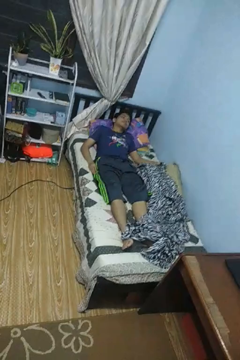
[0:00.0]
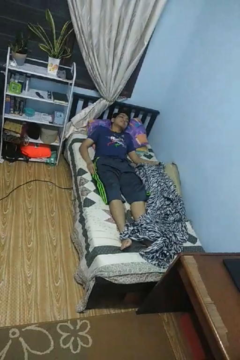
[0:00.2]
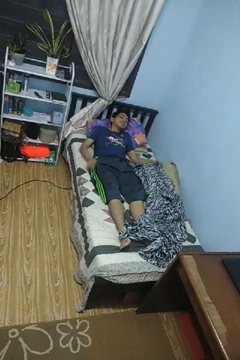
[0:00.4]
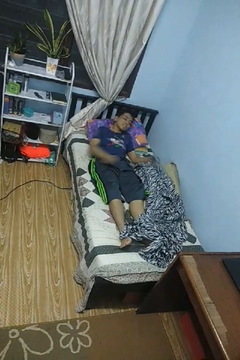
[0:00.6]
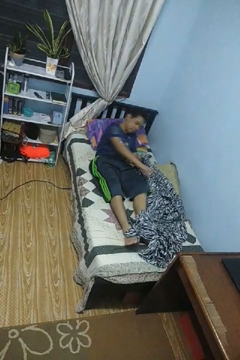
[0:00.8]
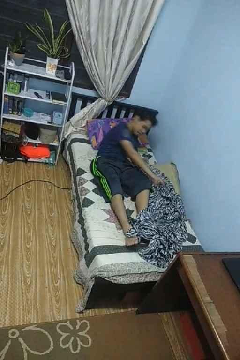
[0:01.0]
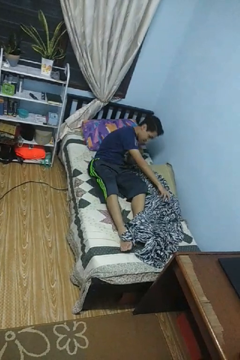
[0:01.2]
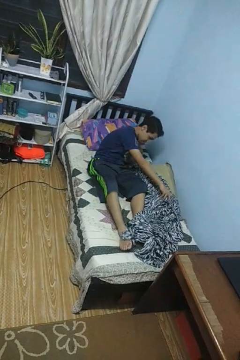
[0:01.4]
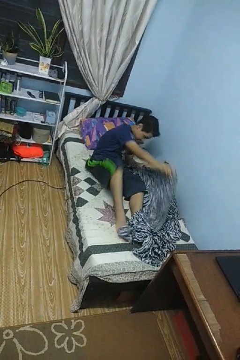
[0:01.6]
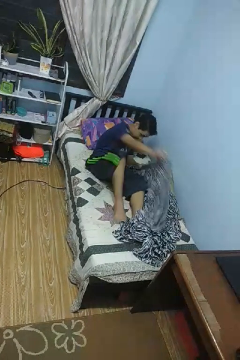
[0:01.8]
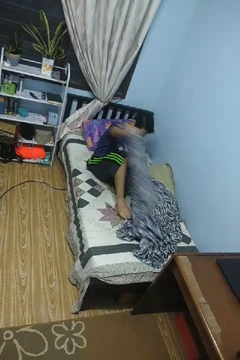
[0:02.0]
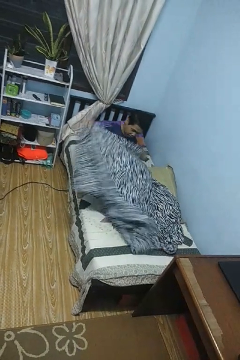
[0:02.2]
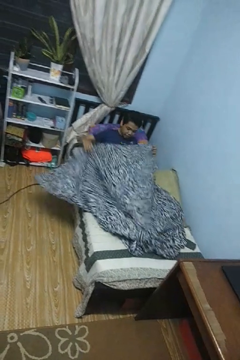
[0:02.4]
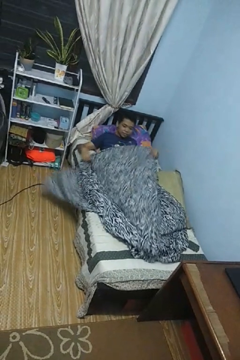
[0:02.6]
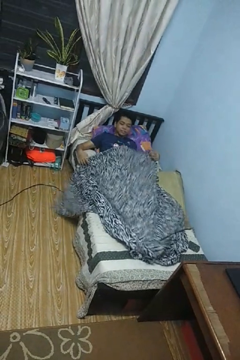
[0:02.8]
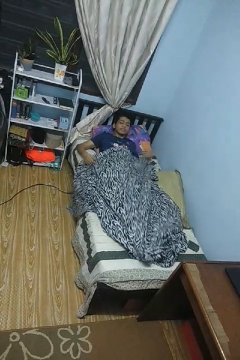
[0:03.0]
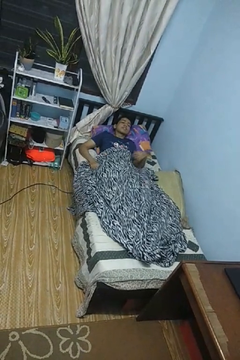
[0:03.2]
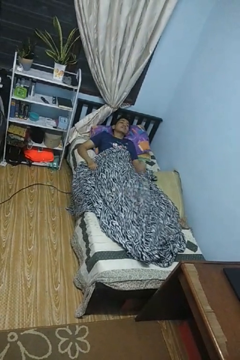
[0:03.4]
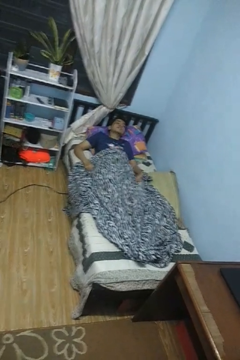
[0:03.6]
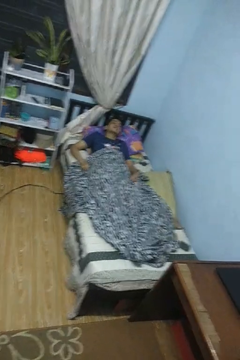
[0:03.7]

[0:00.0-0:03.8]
person covers with blanket

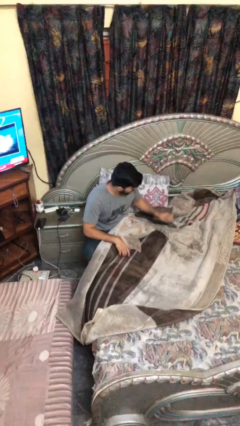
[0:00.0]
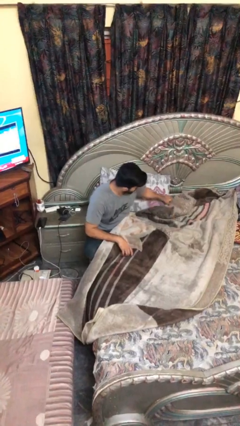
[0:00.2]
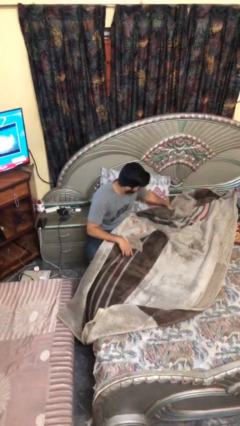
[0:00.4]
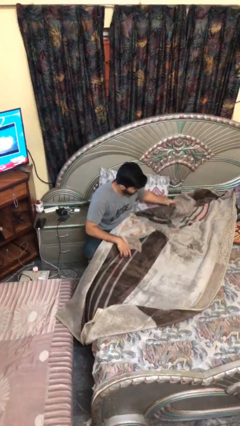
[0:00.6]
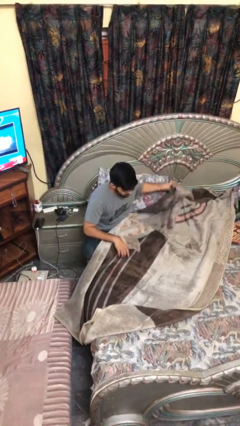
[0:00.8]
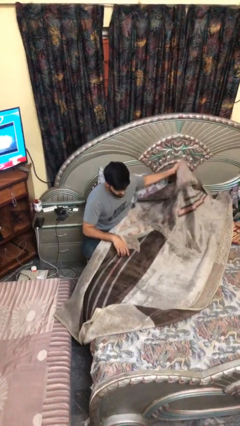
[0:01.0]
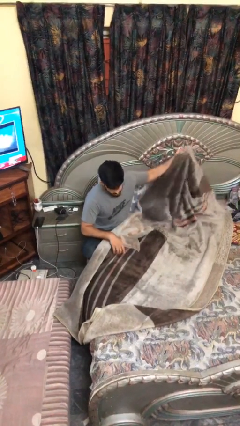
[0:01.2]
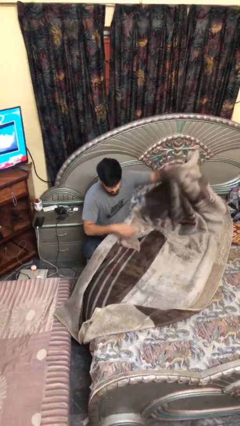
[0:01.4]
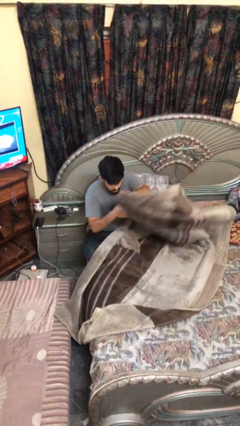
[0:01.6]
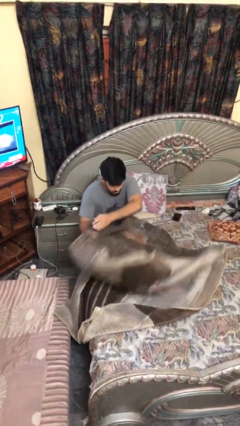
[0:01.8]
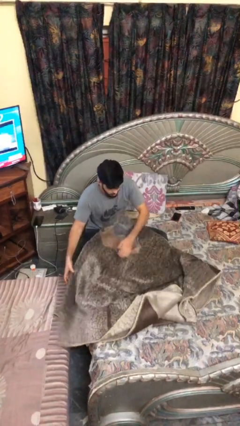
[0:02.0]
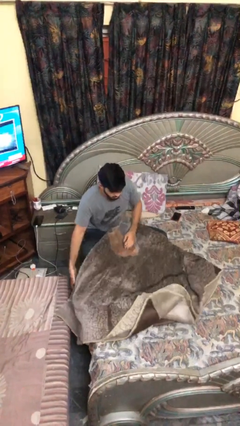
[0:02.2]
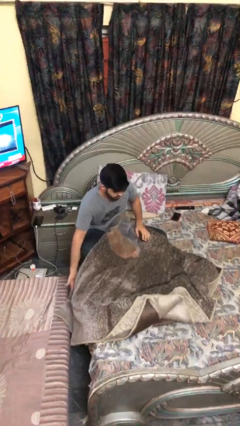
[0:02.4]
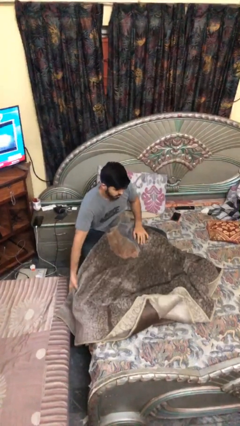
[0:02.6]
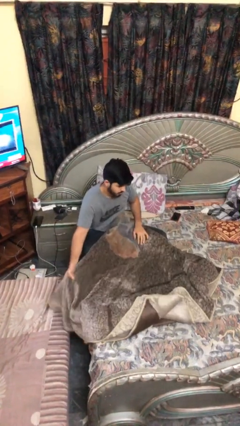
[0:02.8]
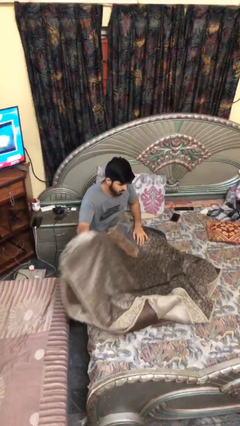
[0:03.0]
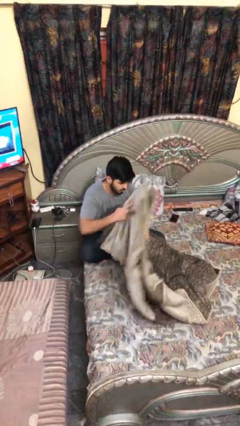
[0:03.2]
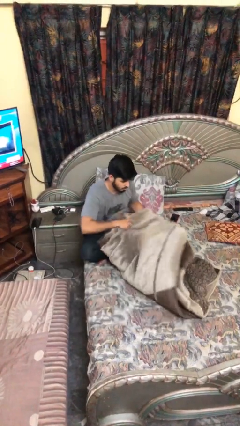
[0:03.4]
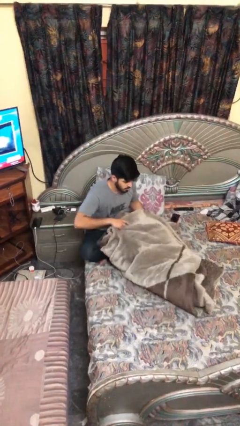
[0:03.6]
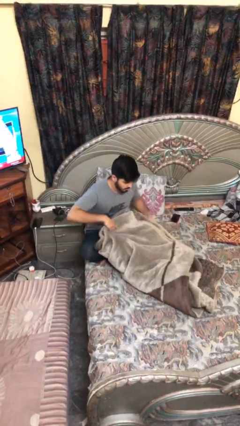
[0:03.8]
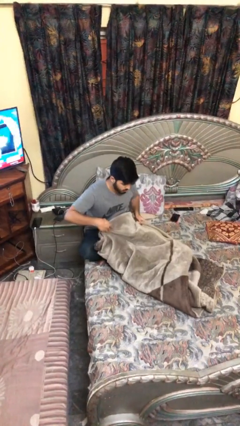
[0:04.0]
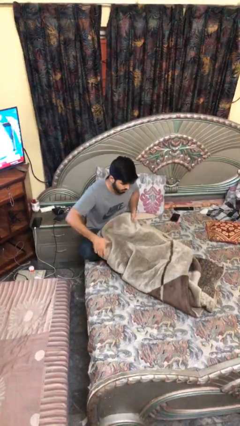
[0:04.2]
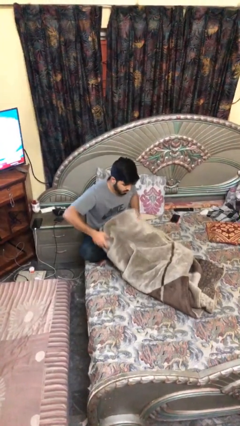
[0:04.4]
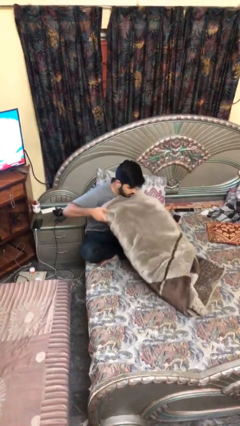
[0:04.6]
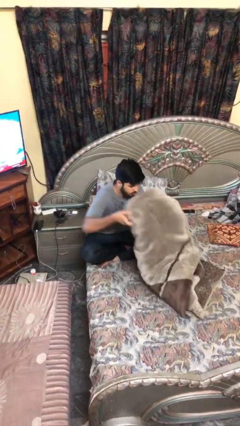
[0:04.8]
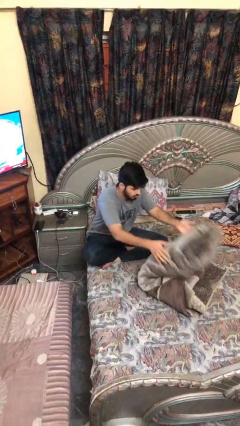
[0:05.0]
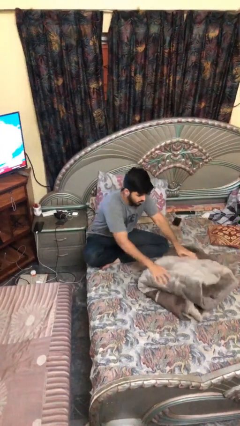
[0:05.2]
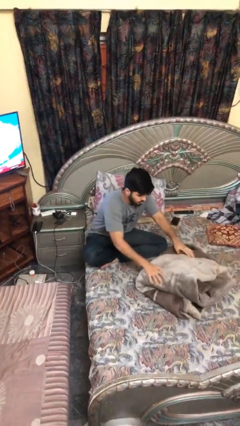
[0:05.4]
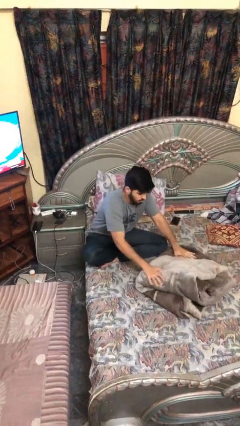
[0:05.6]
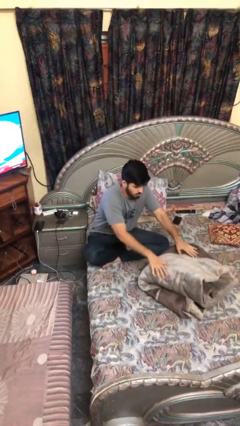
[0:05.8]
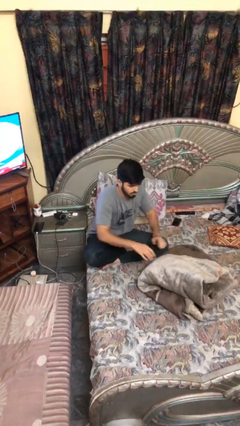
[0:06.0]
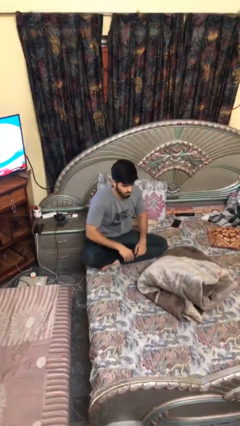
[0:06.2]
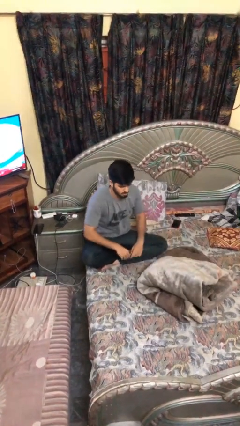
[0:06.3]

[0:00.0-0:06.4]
person folds blanket

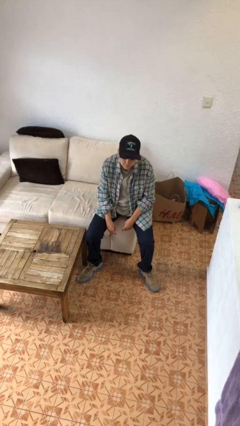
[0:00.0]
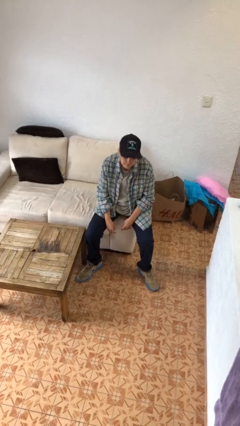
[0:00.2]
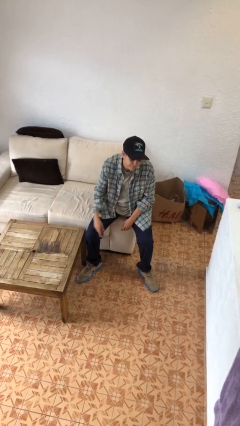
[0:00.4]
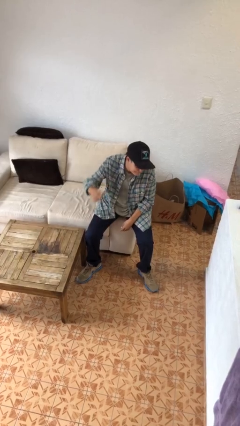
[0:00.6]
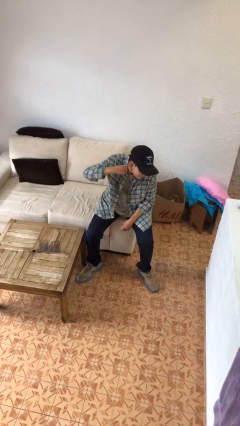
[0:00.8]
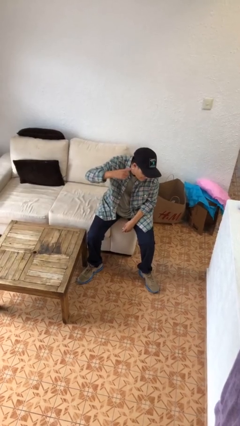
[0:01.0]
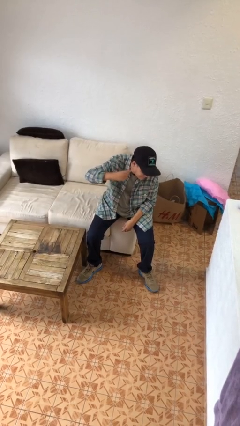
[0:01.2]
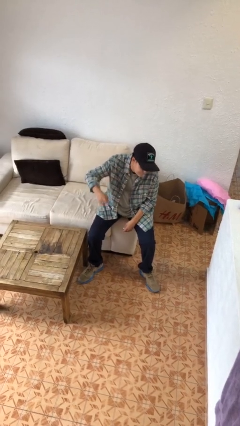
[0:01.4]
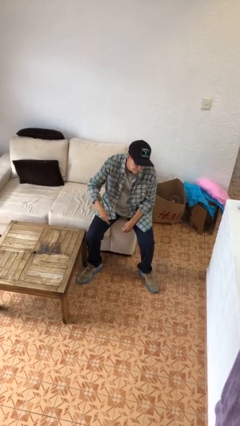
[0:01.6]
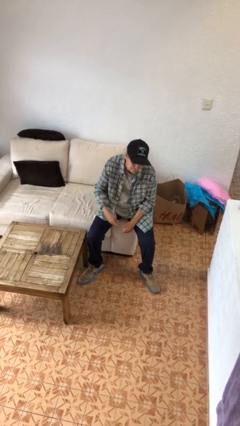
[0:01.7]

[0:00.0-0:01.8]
person gestures listen closely

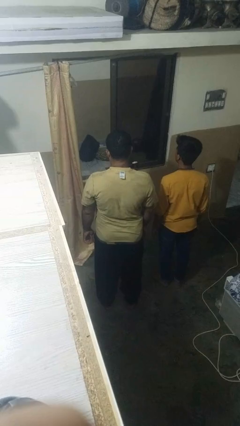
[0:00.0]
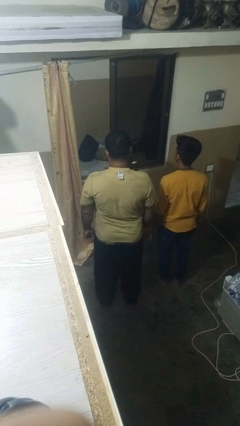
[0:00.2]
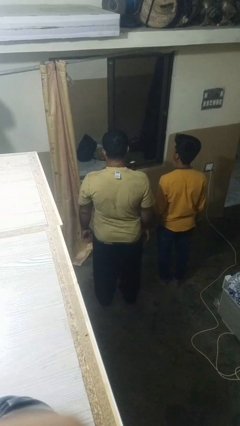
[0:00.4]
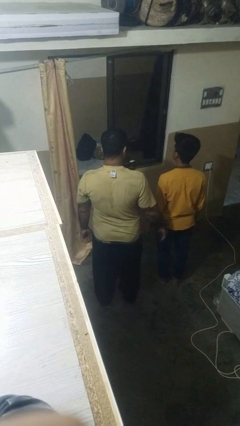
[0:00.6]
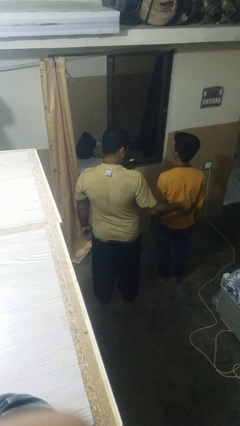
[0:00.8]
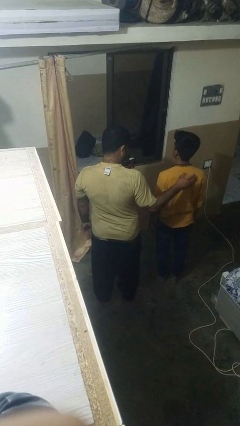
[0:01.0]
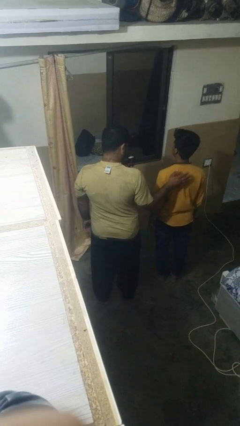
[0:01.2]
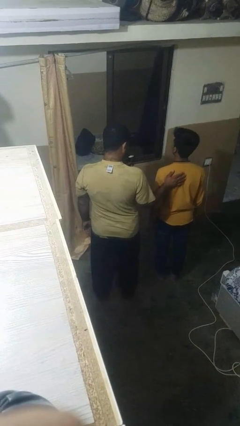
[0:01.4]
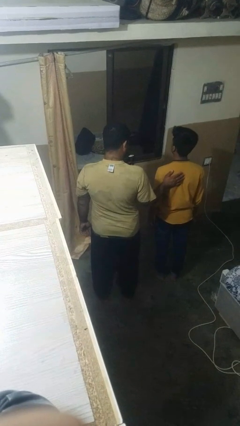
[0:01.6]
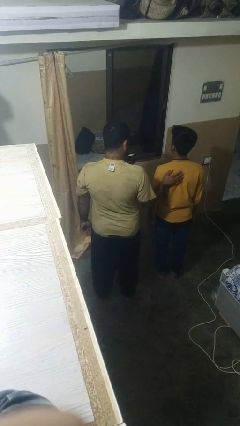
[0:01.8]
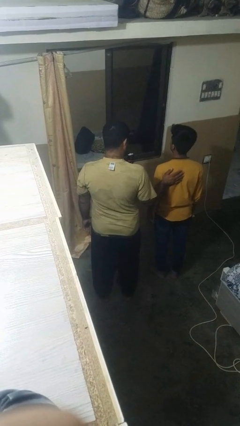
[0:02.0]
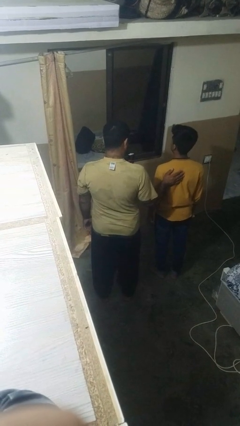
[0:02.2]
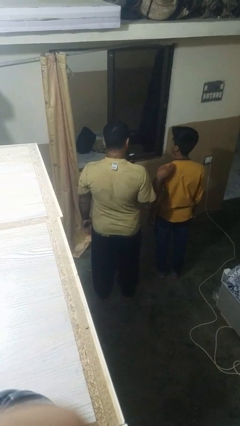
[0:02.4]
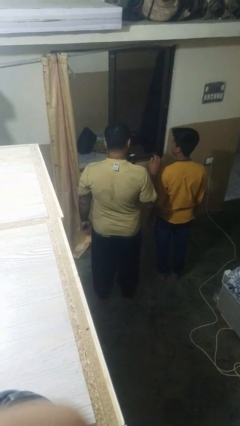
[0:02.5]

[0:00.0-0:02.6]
person touches back of person

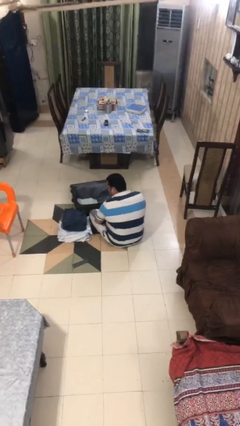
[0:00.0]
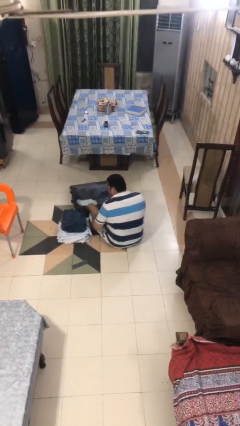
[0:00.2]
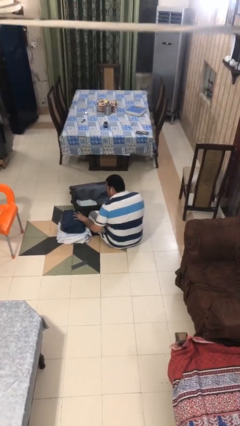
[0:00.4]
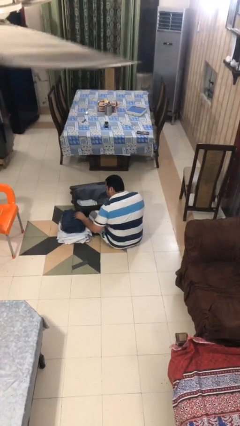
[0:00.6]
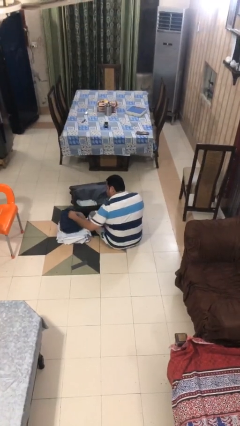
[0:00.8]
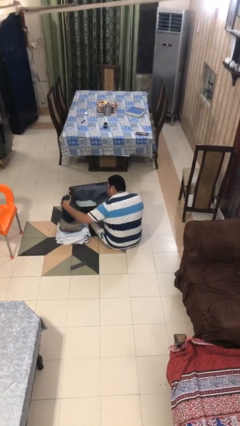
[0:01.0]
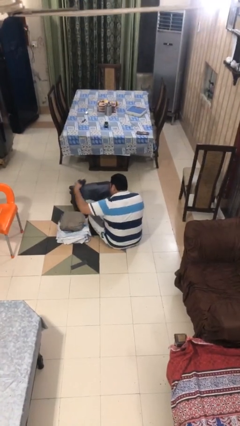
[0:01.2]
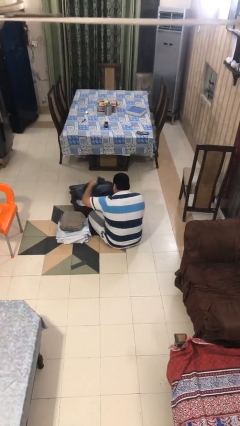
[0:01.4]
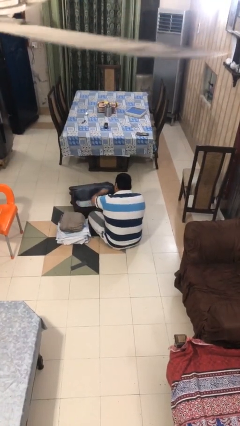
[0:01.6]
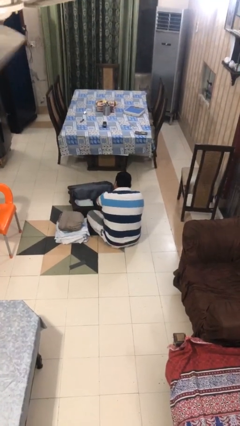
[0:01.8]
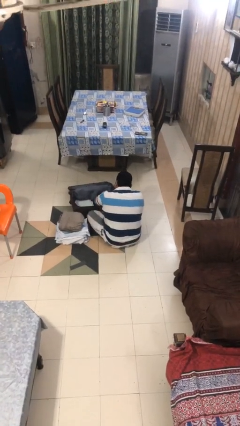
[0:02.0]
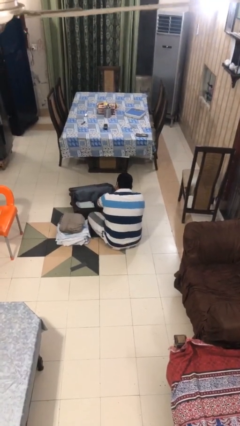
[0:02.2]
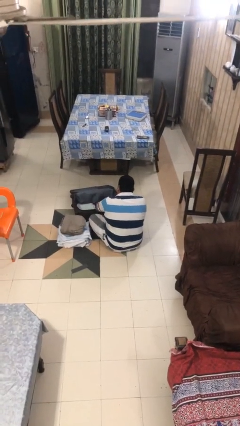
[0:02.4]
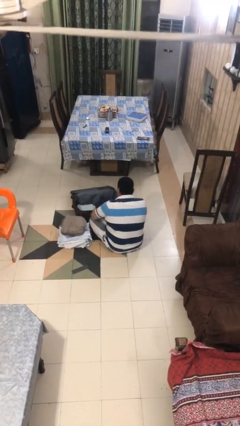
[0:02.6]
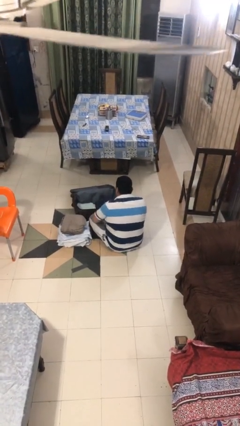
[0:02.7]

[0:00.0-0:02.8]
person loads clothes into suitcase

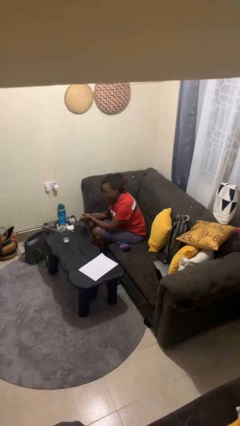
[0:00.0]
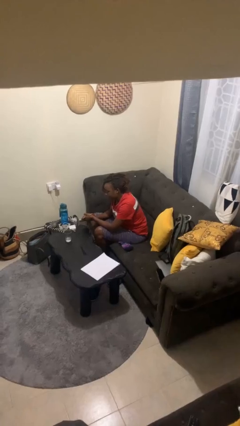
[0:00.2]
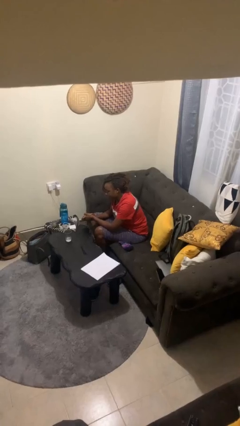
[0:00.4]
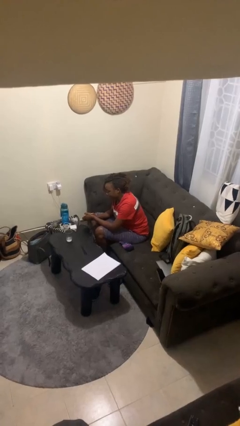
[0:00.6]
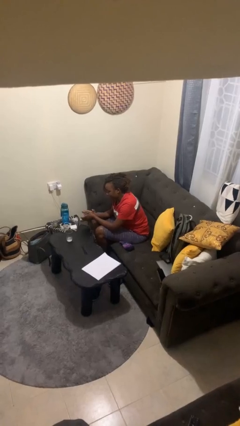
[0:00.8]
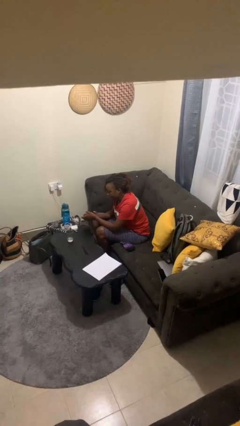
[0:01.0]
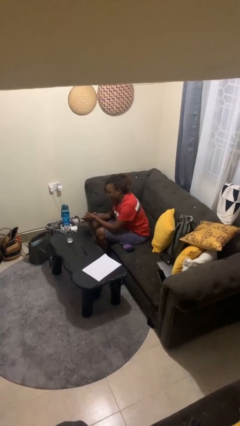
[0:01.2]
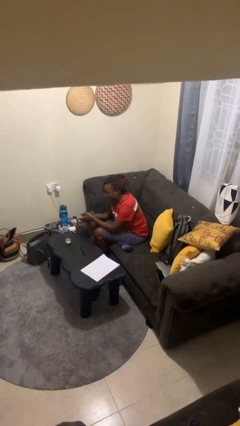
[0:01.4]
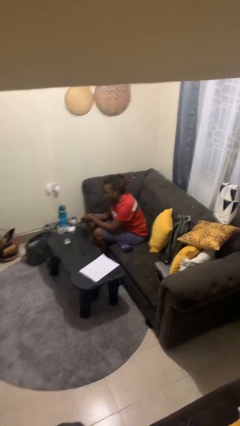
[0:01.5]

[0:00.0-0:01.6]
person claps hands
